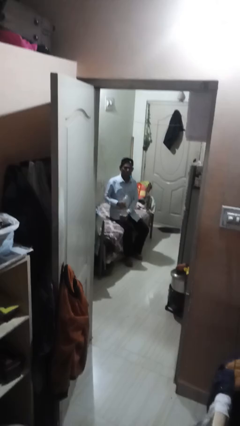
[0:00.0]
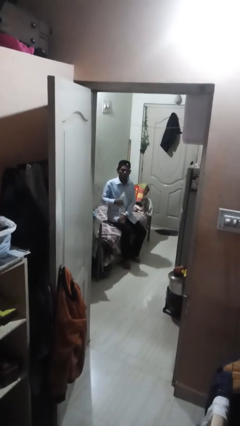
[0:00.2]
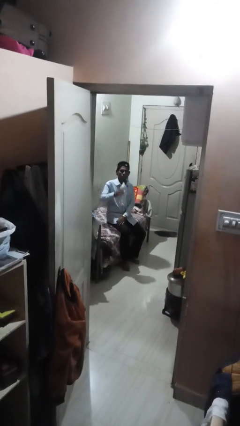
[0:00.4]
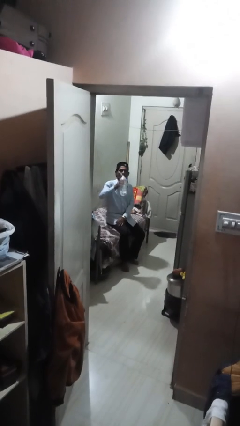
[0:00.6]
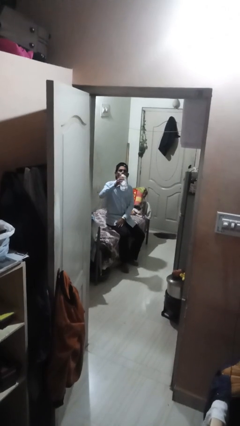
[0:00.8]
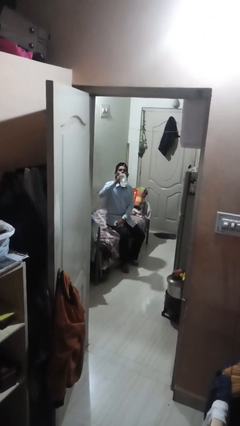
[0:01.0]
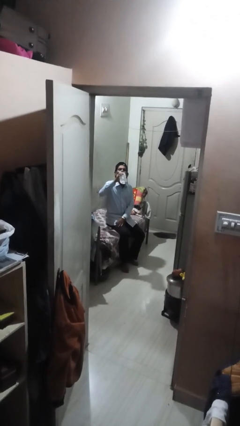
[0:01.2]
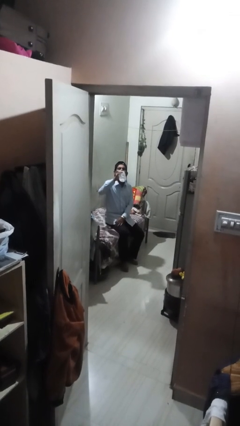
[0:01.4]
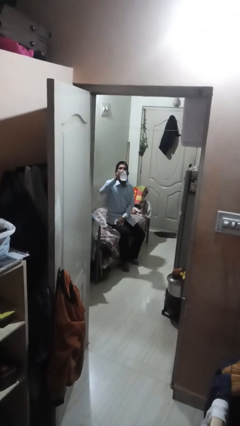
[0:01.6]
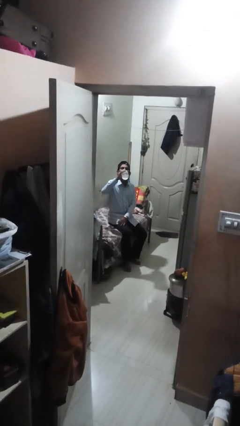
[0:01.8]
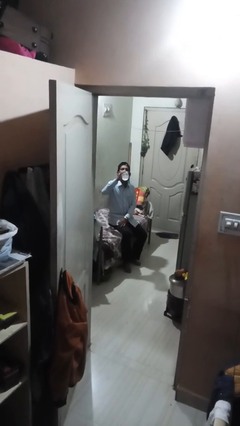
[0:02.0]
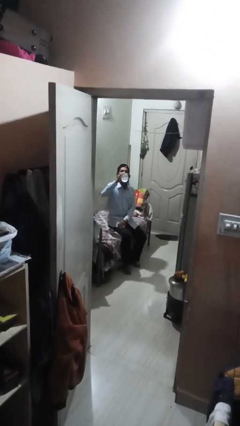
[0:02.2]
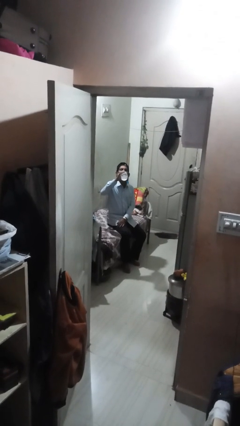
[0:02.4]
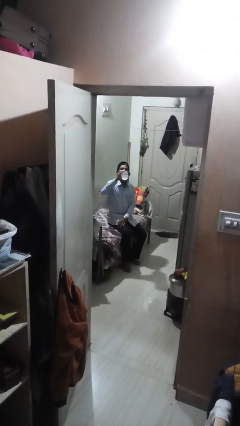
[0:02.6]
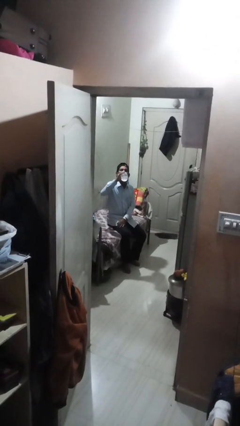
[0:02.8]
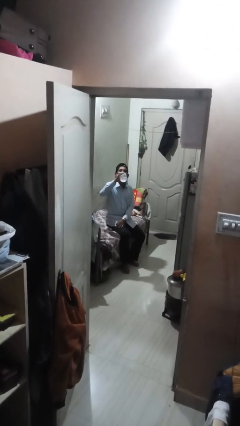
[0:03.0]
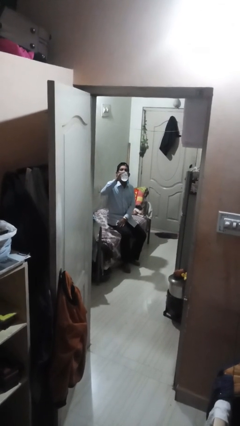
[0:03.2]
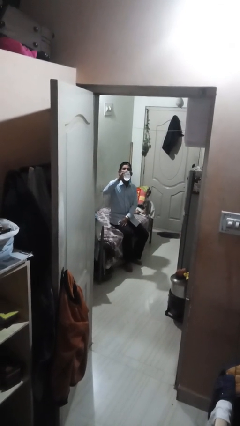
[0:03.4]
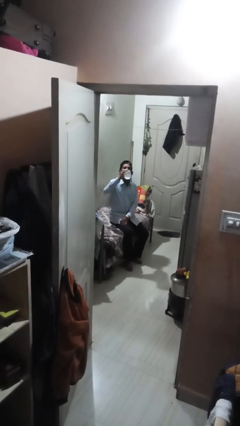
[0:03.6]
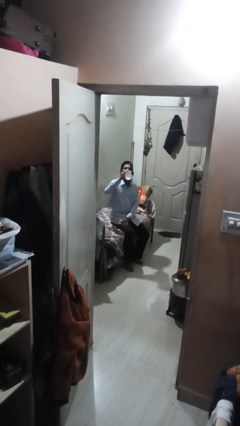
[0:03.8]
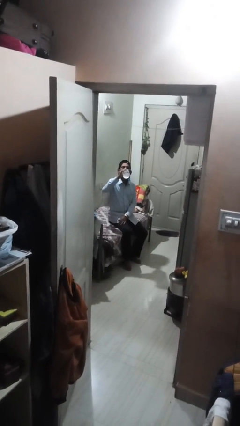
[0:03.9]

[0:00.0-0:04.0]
person drinks from bottle

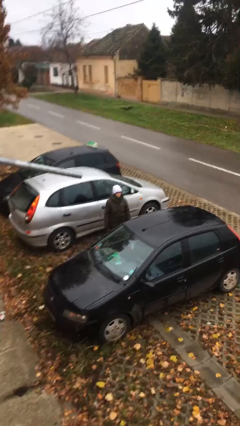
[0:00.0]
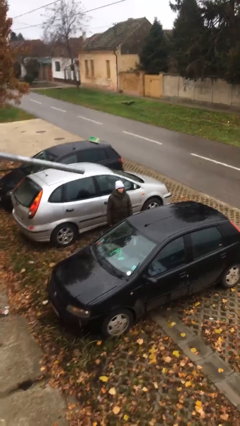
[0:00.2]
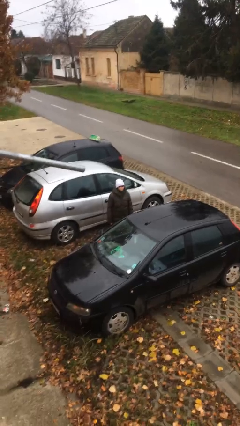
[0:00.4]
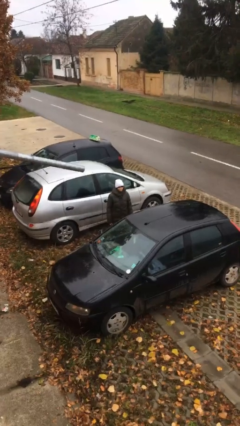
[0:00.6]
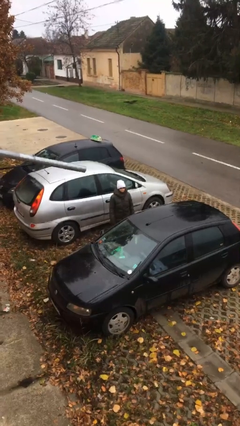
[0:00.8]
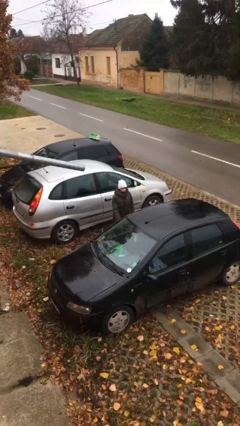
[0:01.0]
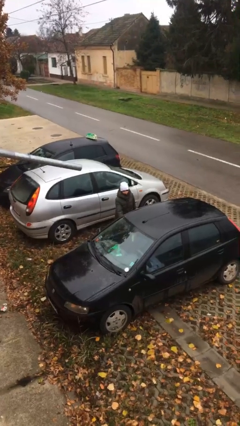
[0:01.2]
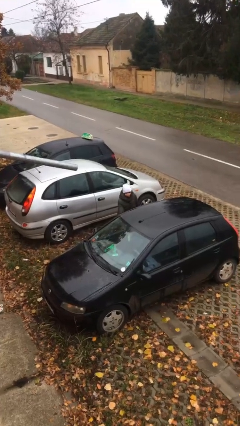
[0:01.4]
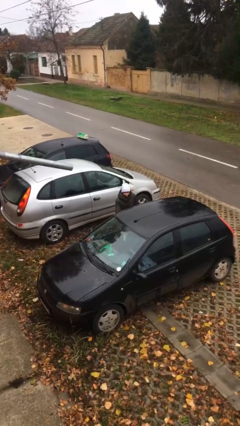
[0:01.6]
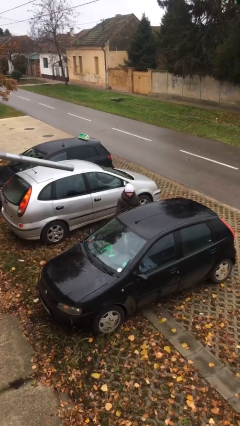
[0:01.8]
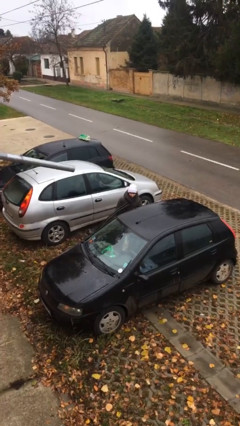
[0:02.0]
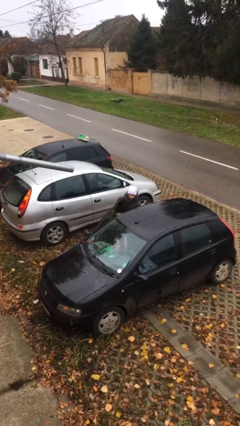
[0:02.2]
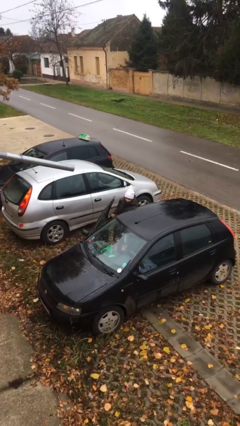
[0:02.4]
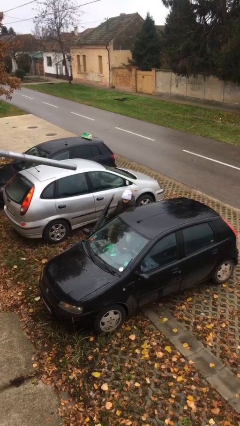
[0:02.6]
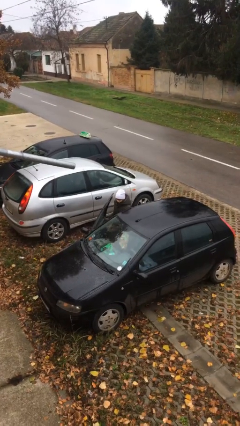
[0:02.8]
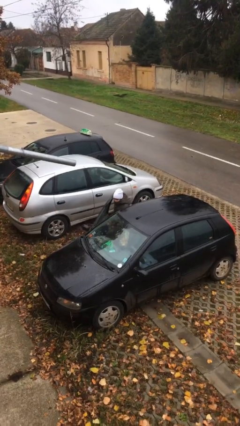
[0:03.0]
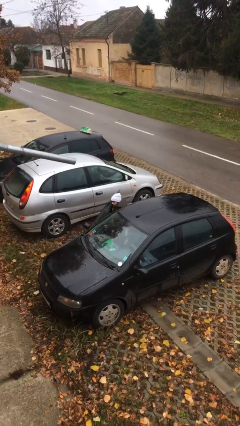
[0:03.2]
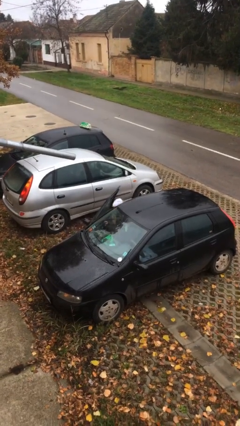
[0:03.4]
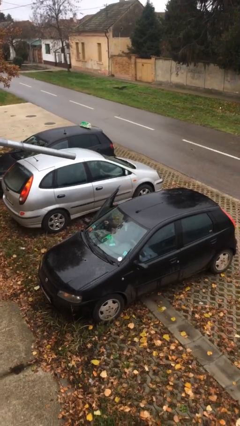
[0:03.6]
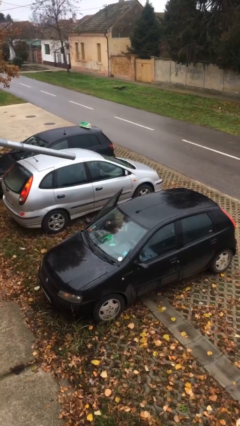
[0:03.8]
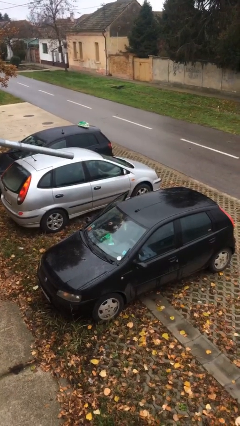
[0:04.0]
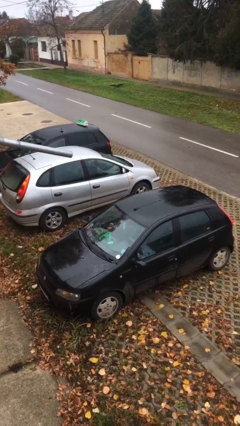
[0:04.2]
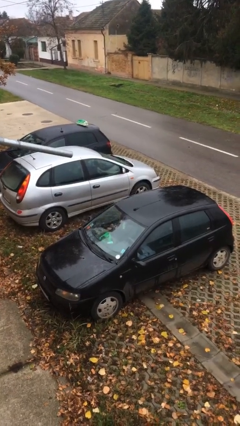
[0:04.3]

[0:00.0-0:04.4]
person enters car

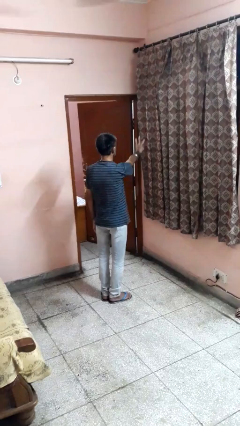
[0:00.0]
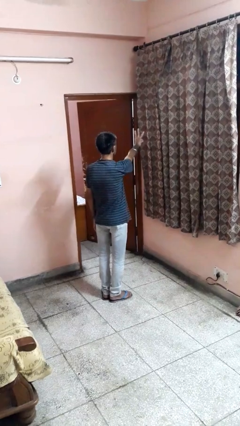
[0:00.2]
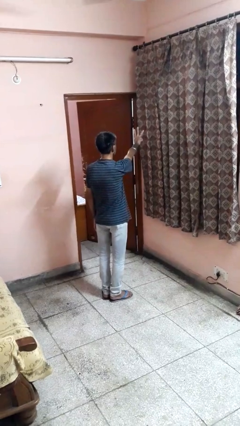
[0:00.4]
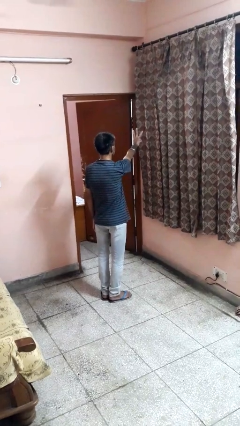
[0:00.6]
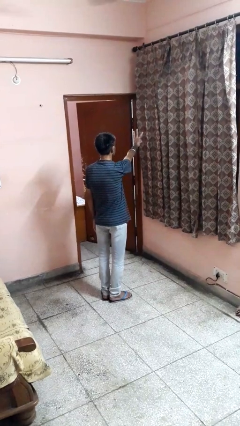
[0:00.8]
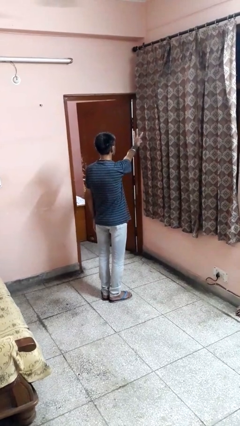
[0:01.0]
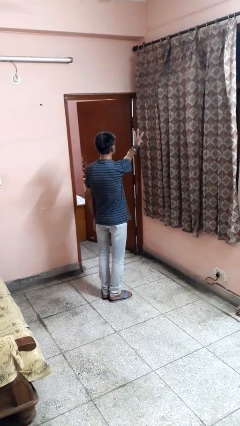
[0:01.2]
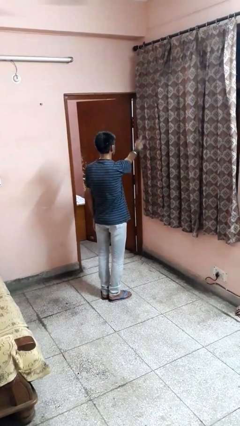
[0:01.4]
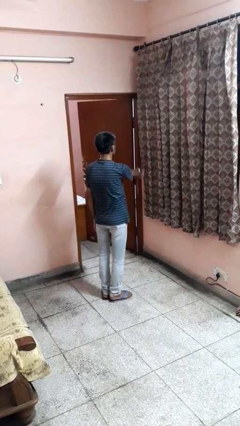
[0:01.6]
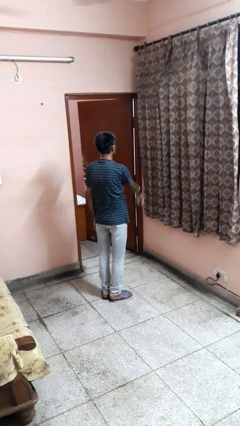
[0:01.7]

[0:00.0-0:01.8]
person gestures number three

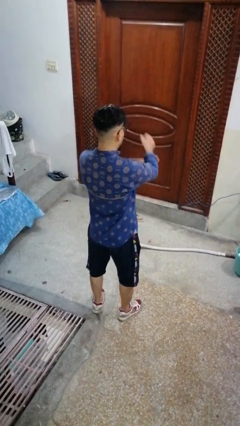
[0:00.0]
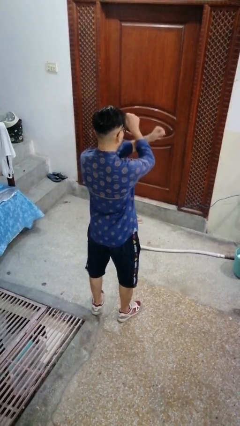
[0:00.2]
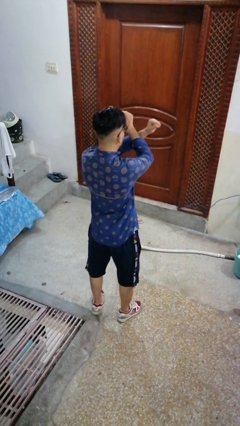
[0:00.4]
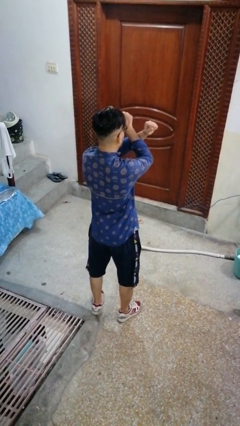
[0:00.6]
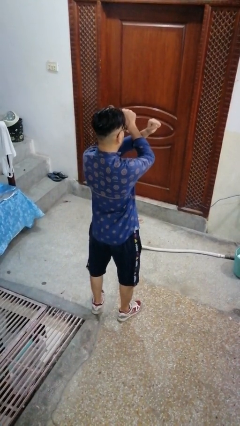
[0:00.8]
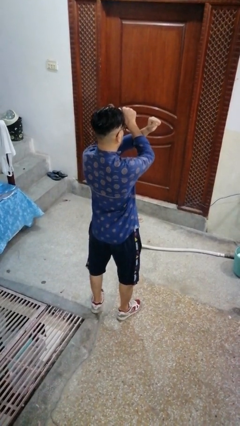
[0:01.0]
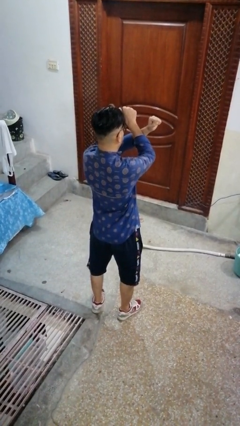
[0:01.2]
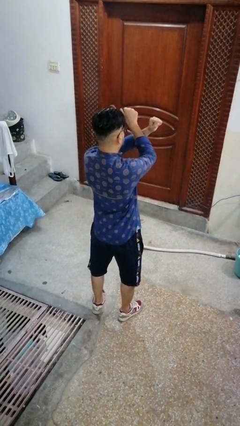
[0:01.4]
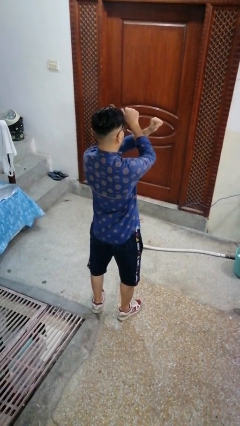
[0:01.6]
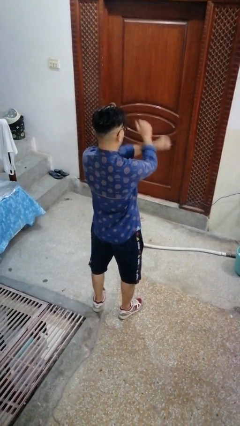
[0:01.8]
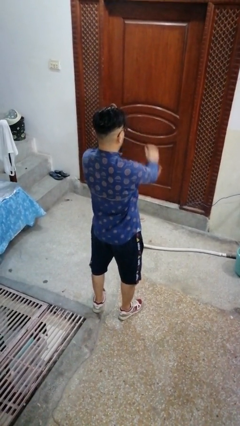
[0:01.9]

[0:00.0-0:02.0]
person gestures arms x

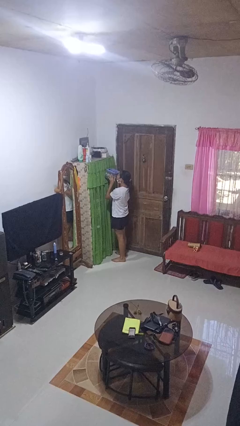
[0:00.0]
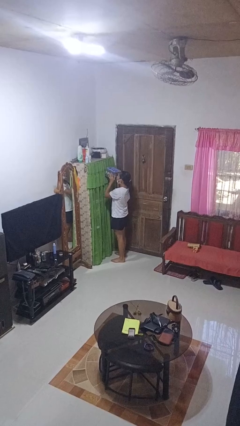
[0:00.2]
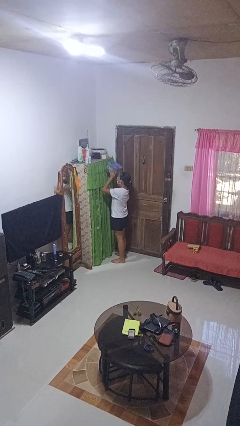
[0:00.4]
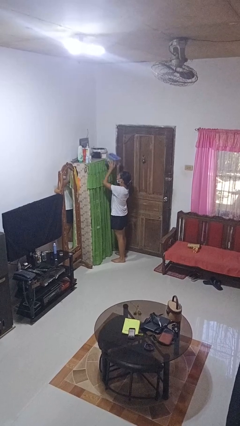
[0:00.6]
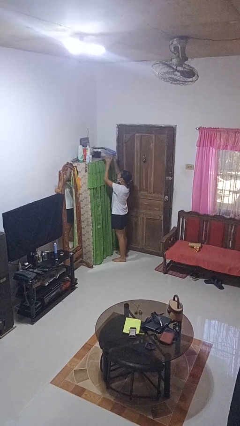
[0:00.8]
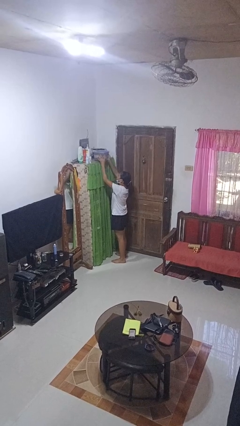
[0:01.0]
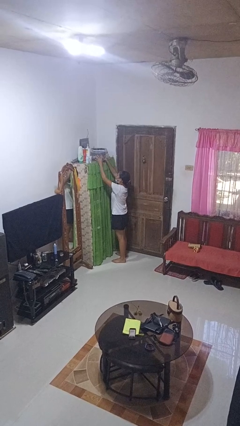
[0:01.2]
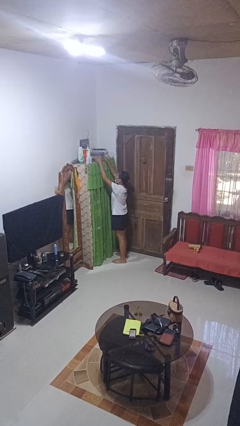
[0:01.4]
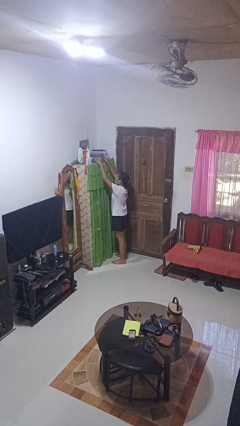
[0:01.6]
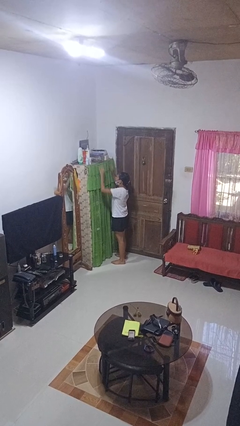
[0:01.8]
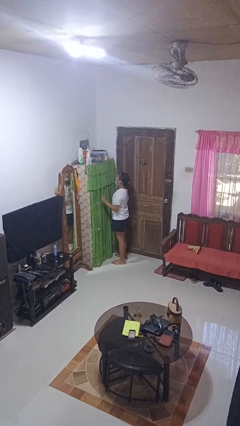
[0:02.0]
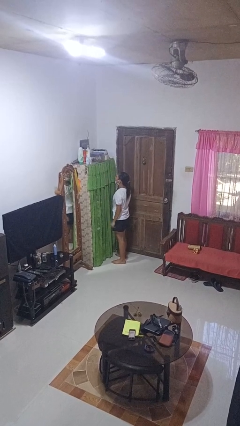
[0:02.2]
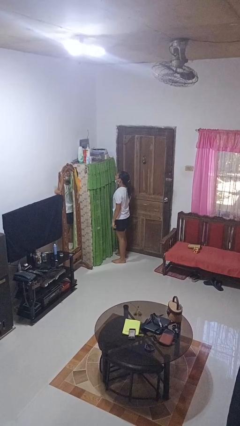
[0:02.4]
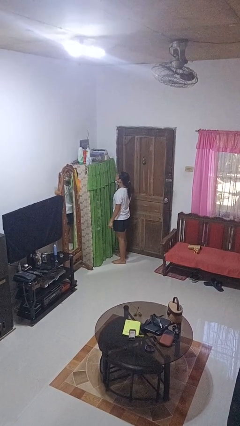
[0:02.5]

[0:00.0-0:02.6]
person puts down object on shelf

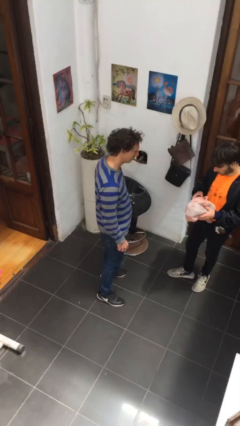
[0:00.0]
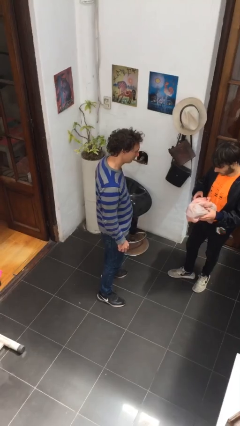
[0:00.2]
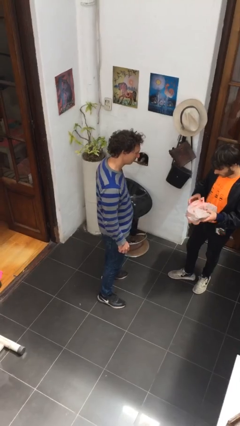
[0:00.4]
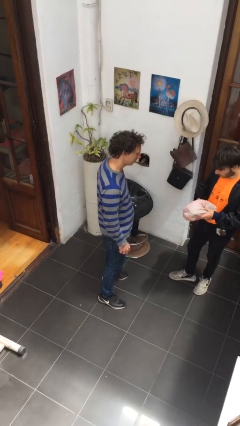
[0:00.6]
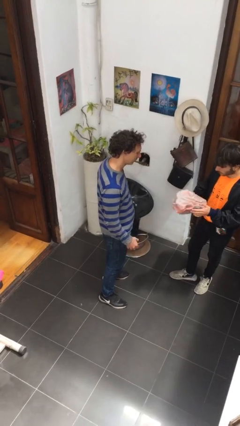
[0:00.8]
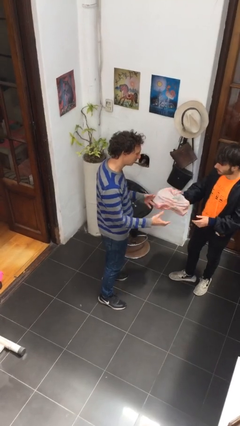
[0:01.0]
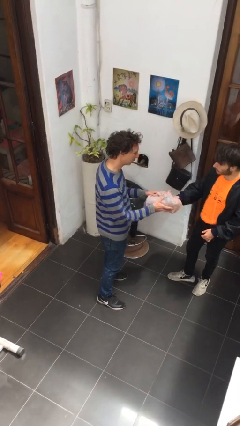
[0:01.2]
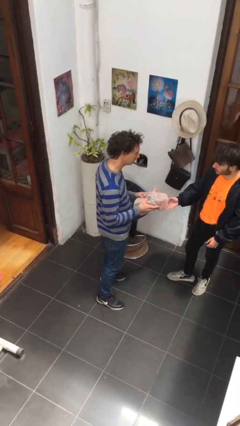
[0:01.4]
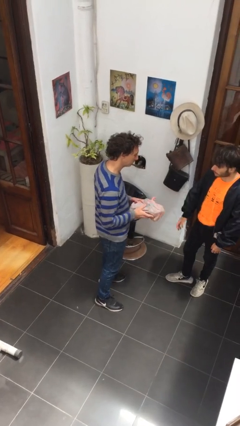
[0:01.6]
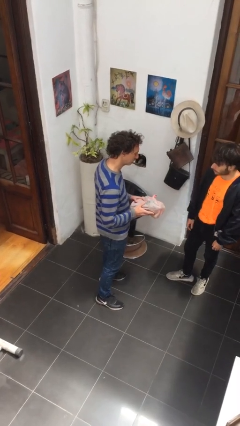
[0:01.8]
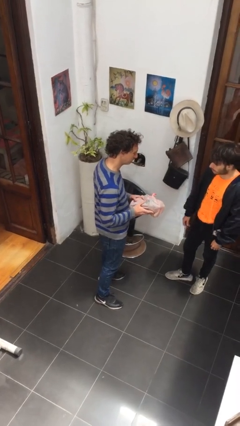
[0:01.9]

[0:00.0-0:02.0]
person transfers object to person

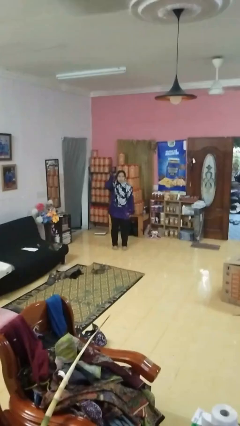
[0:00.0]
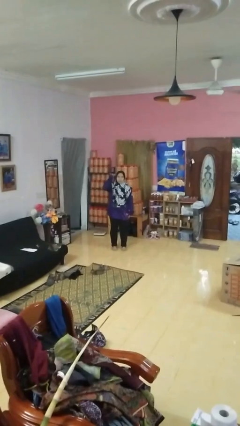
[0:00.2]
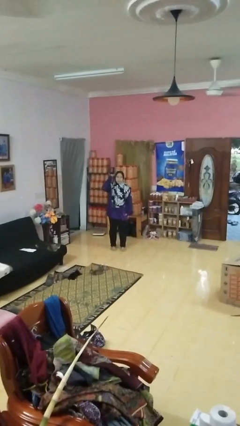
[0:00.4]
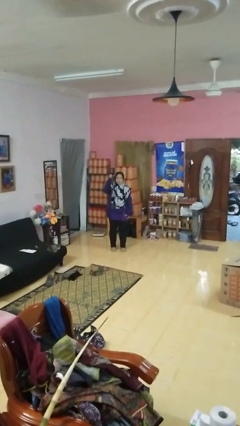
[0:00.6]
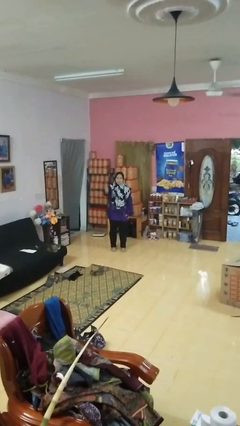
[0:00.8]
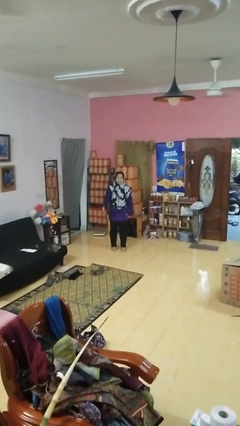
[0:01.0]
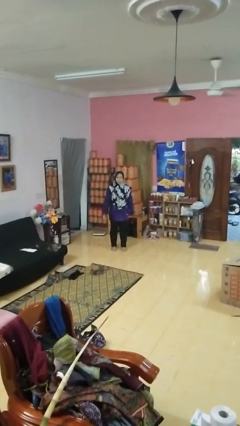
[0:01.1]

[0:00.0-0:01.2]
person gestures behind me
